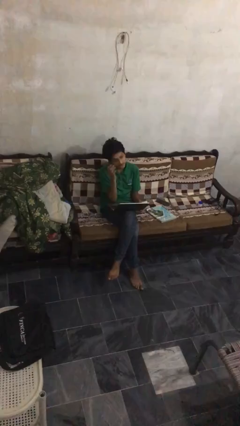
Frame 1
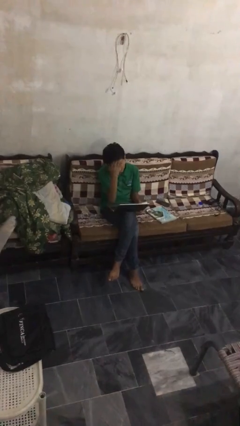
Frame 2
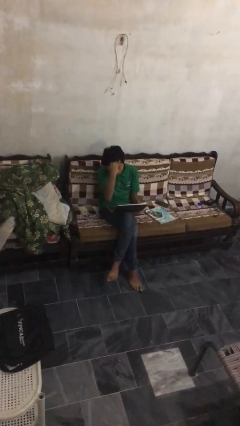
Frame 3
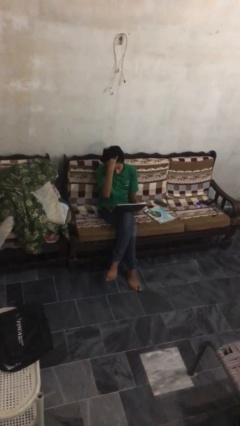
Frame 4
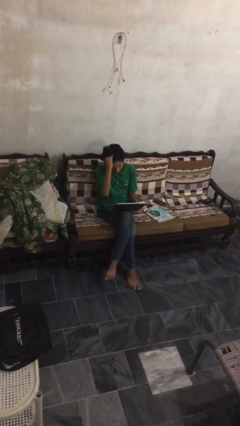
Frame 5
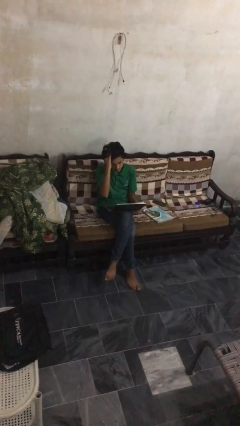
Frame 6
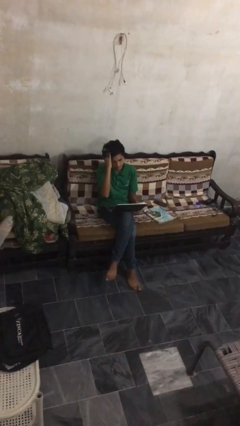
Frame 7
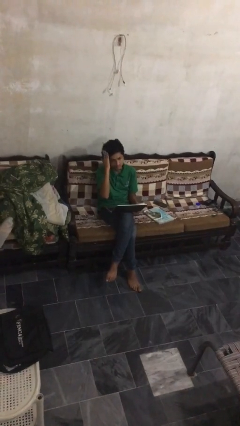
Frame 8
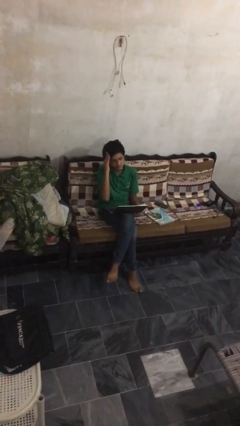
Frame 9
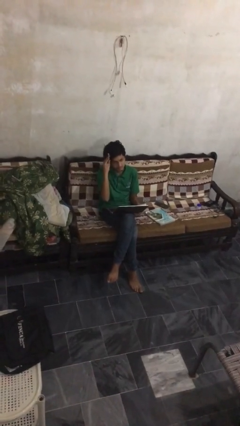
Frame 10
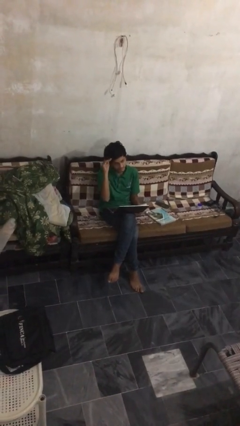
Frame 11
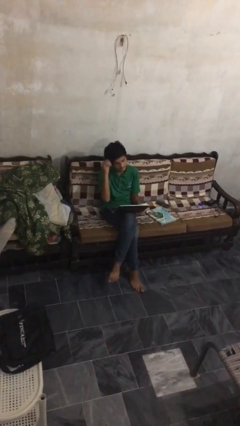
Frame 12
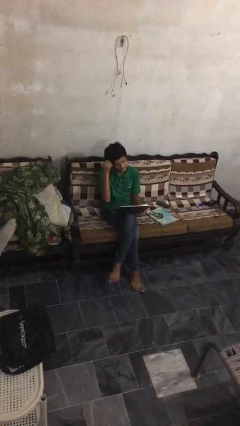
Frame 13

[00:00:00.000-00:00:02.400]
person interacts with laptop

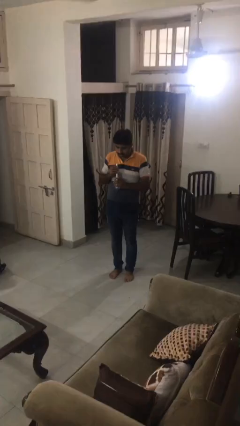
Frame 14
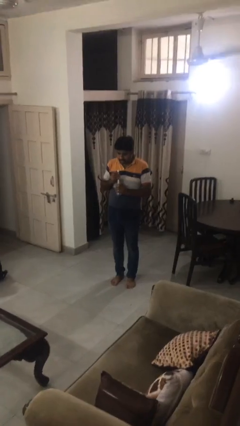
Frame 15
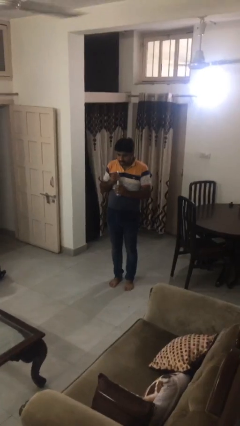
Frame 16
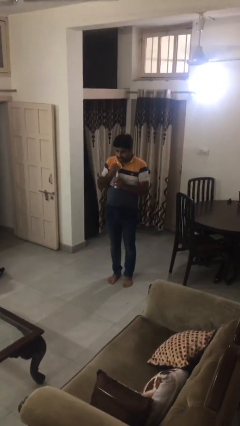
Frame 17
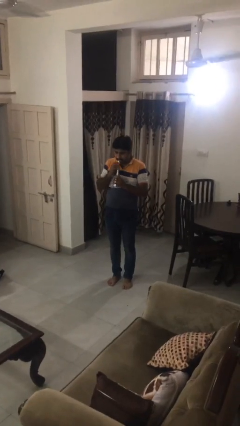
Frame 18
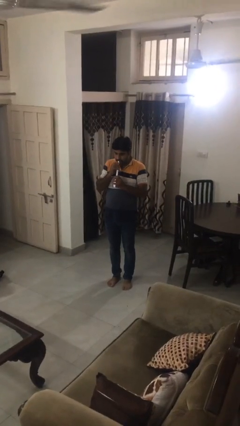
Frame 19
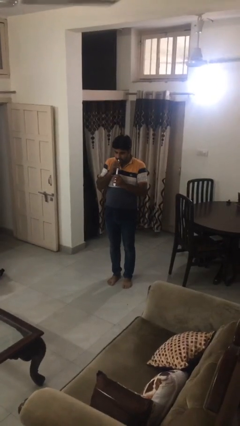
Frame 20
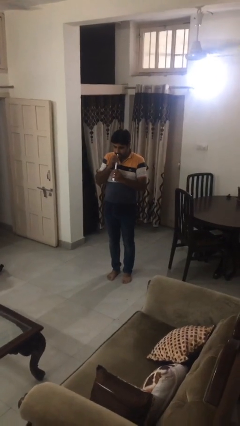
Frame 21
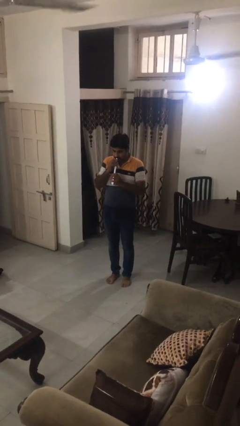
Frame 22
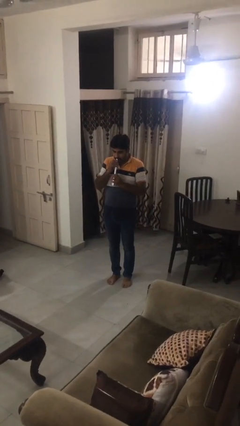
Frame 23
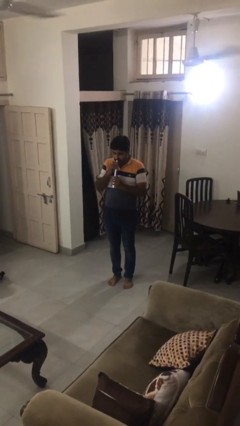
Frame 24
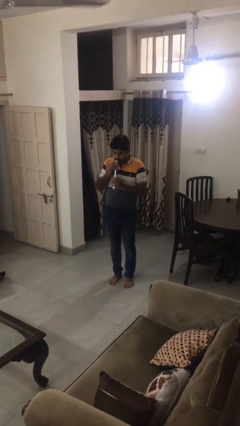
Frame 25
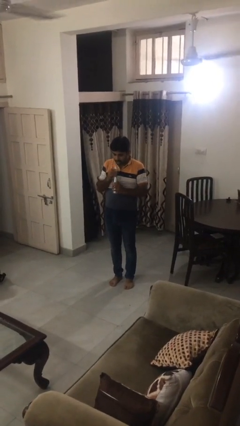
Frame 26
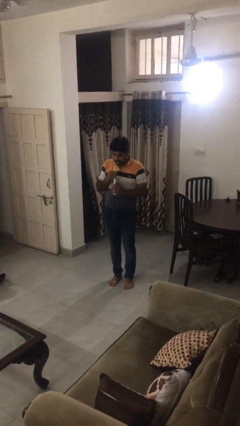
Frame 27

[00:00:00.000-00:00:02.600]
person drinks from straw

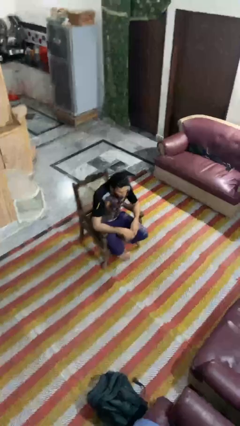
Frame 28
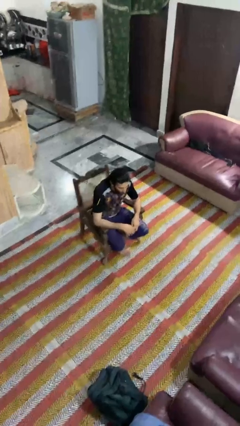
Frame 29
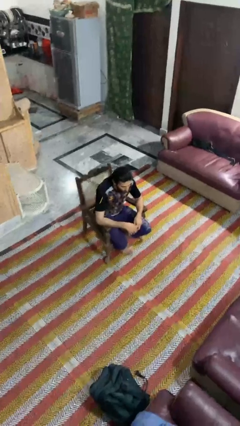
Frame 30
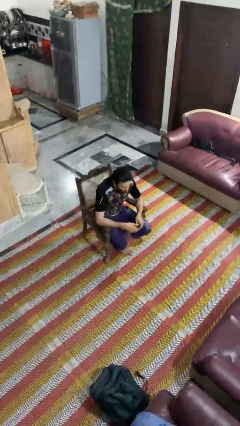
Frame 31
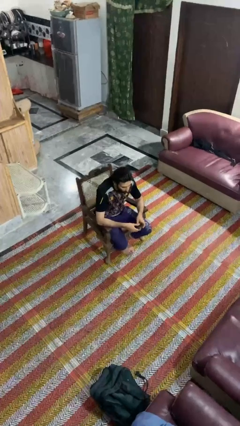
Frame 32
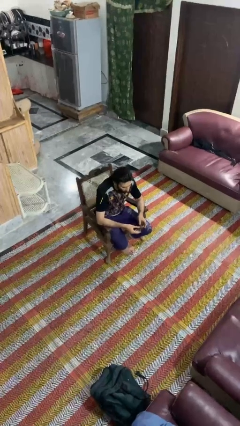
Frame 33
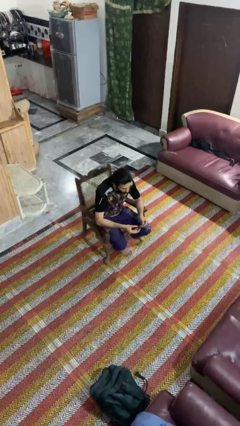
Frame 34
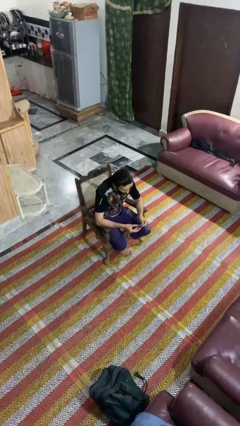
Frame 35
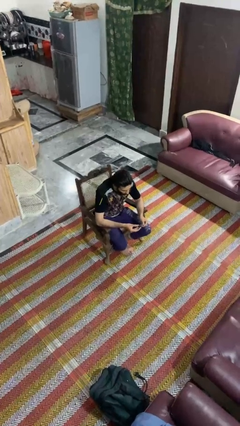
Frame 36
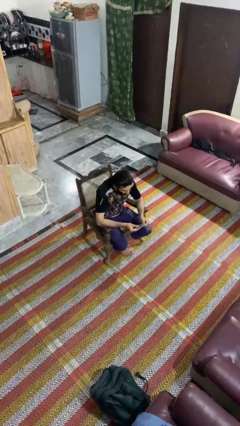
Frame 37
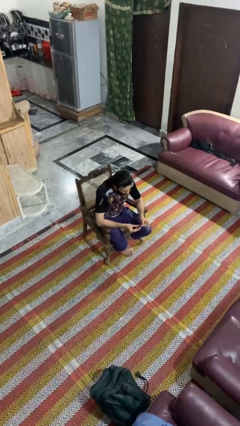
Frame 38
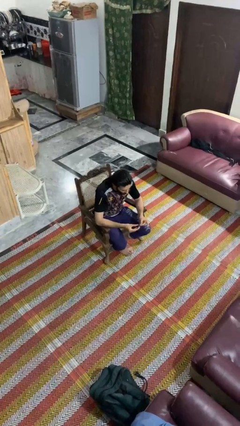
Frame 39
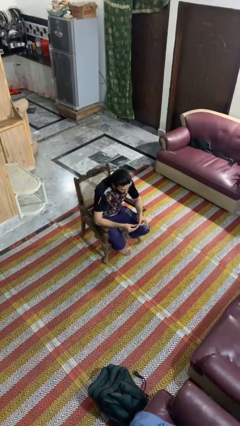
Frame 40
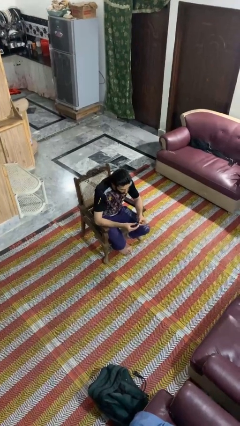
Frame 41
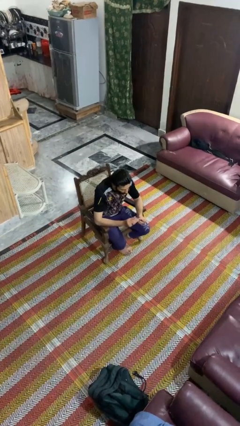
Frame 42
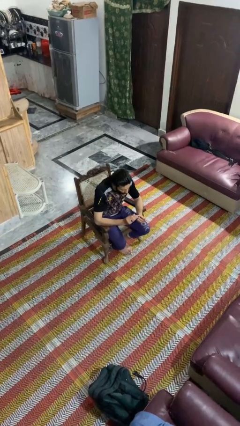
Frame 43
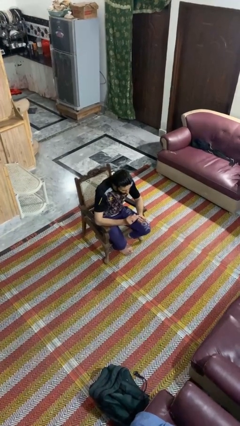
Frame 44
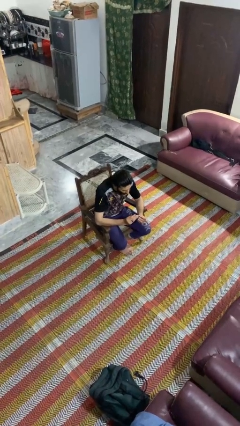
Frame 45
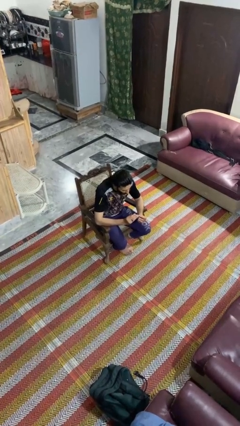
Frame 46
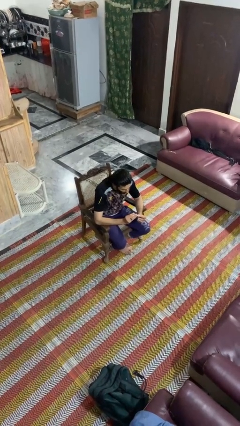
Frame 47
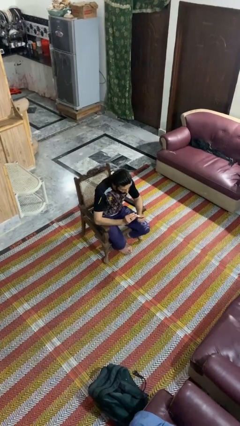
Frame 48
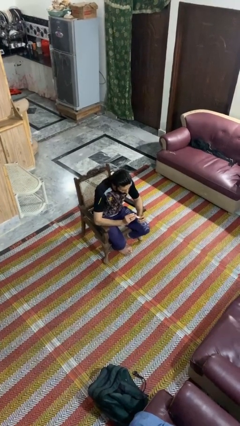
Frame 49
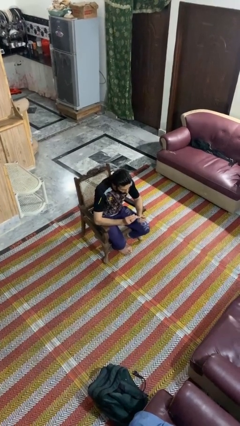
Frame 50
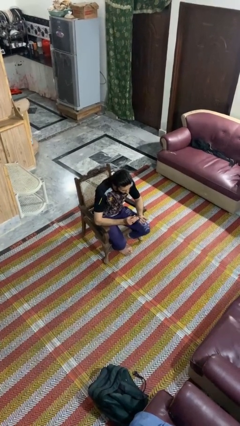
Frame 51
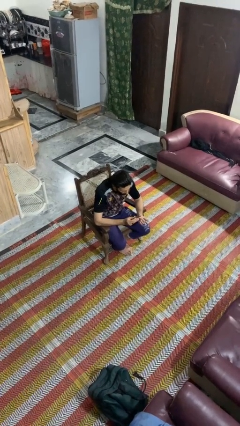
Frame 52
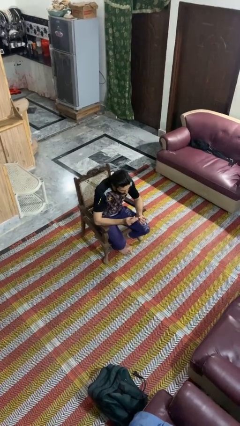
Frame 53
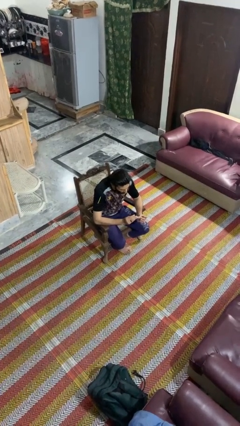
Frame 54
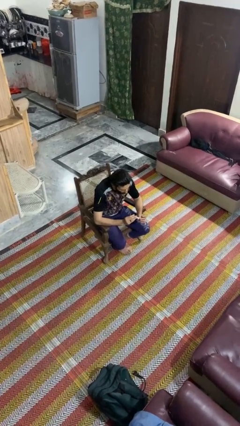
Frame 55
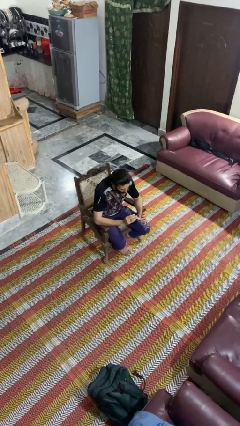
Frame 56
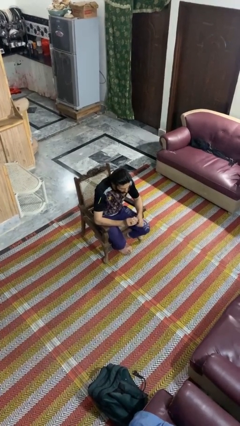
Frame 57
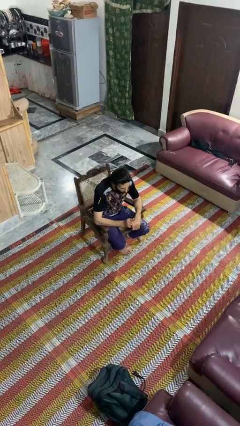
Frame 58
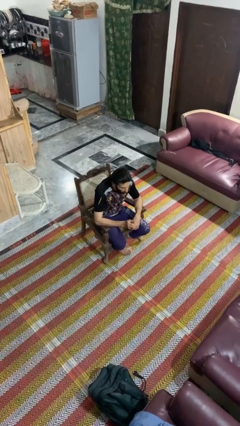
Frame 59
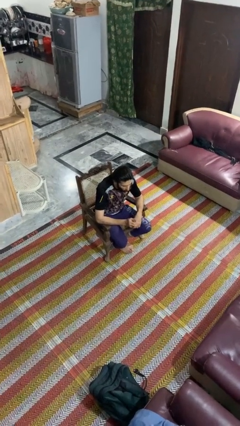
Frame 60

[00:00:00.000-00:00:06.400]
person clips fingernails

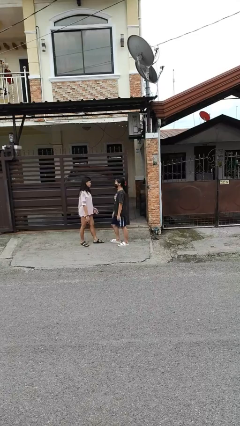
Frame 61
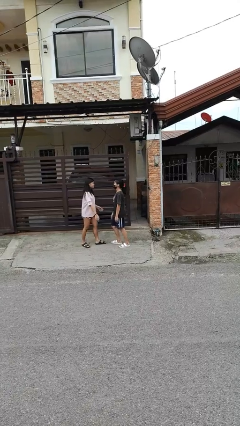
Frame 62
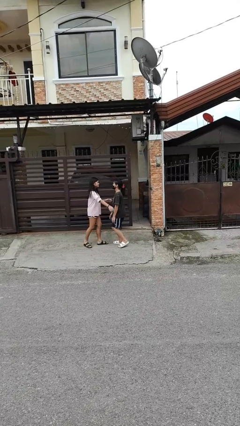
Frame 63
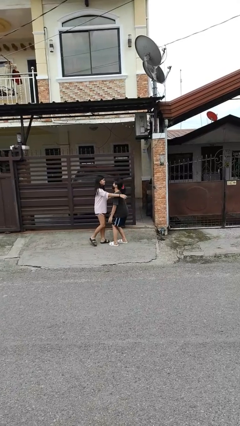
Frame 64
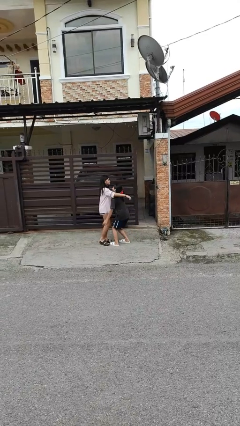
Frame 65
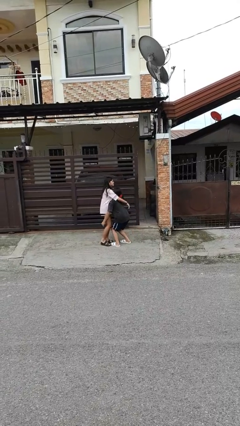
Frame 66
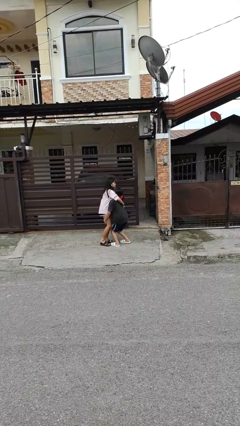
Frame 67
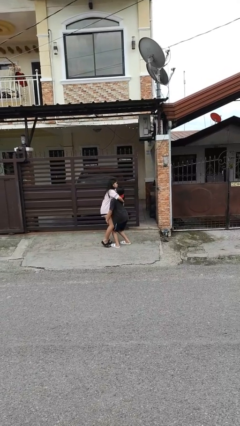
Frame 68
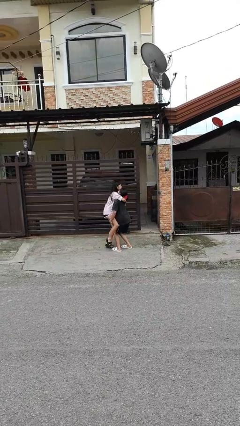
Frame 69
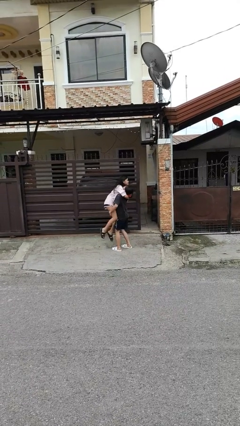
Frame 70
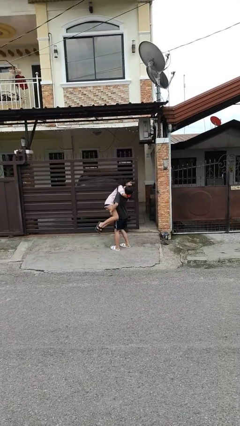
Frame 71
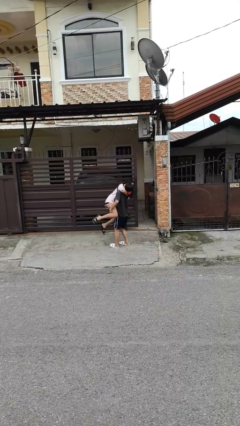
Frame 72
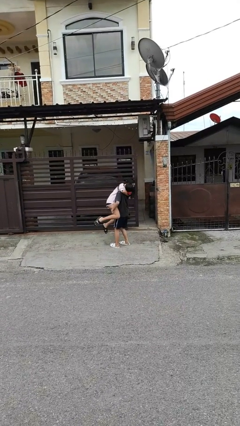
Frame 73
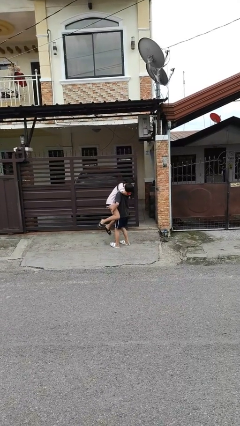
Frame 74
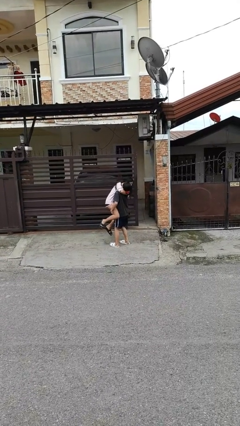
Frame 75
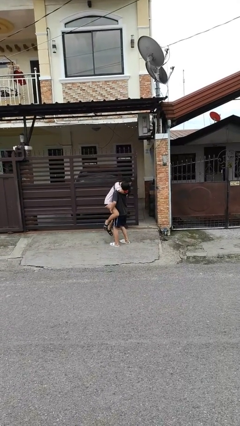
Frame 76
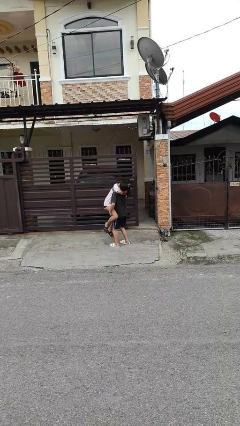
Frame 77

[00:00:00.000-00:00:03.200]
person picks up person

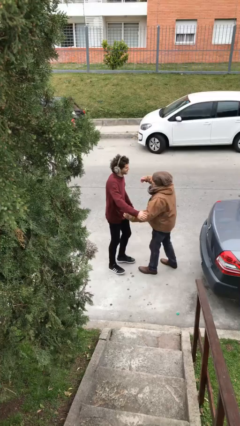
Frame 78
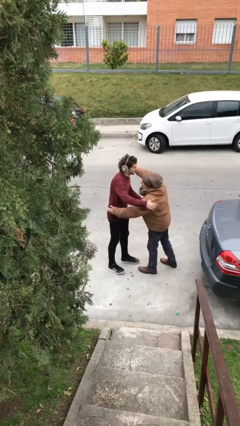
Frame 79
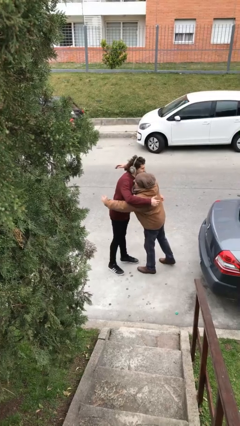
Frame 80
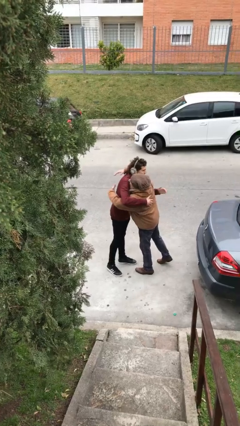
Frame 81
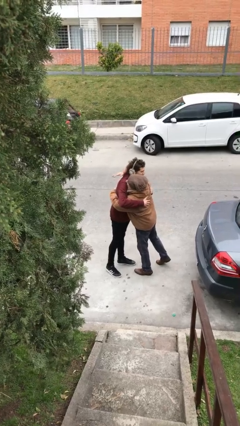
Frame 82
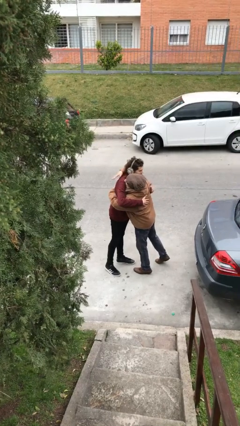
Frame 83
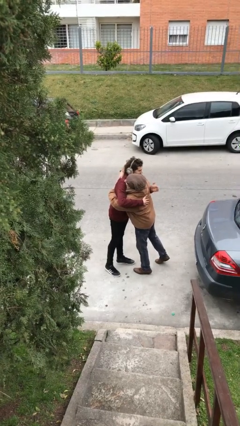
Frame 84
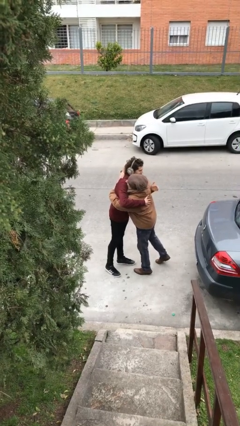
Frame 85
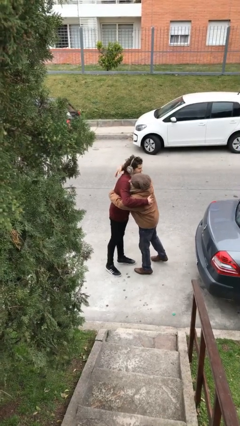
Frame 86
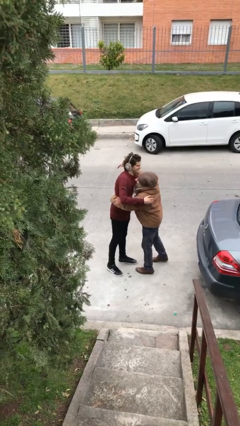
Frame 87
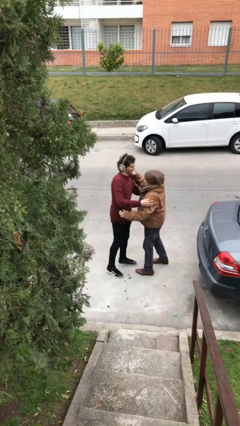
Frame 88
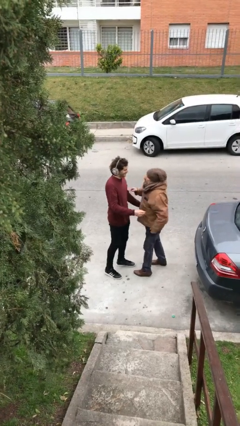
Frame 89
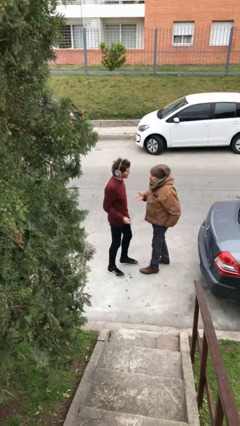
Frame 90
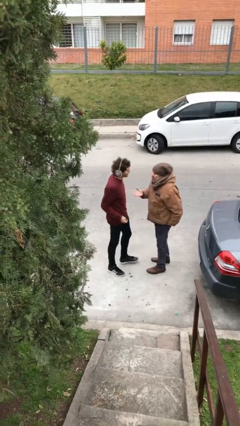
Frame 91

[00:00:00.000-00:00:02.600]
person embraces person
